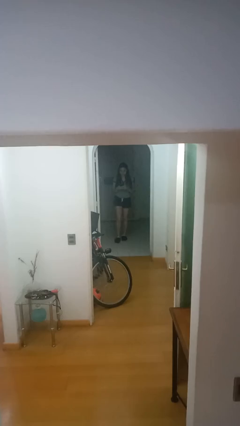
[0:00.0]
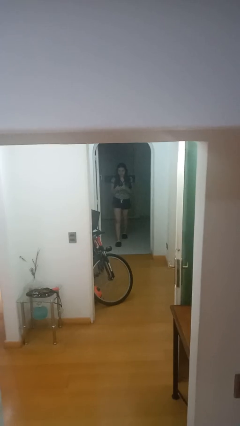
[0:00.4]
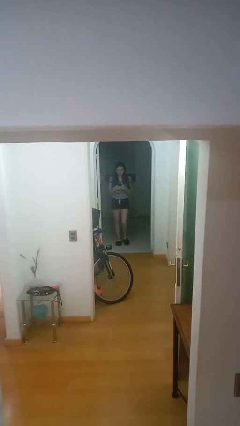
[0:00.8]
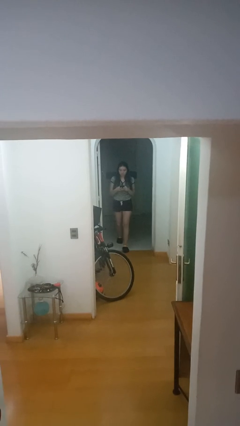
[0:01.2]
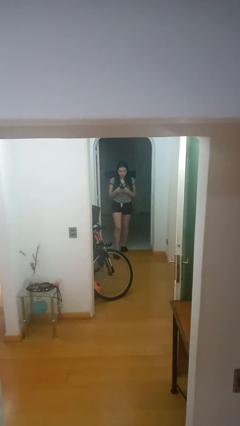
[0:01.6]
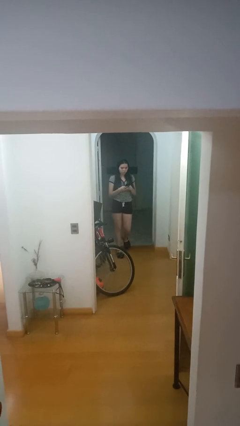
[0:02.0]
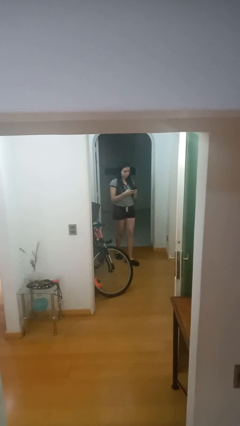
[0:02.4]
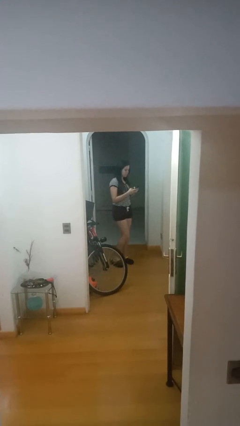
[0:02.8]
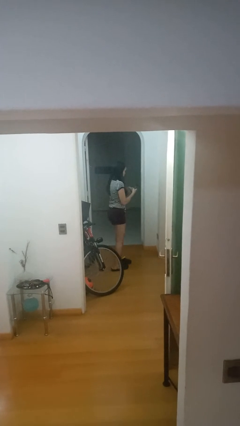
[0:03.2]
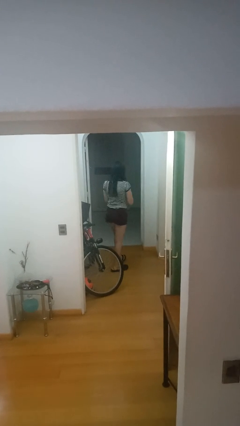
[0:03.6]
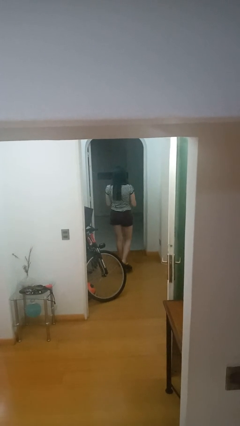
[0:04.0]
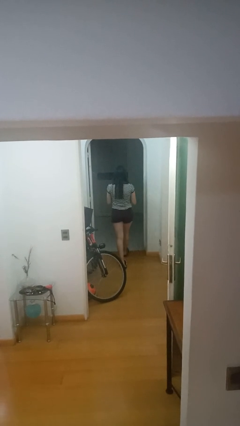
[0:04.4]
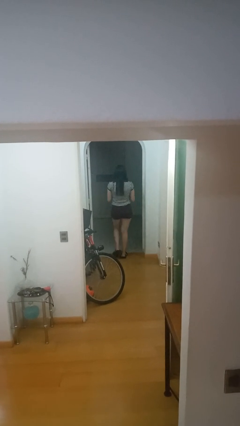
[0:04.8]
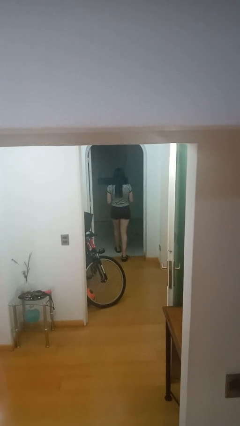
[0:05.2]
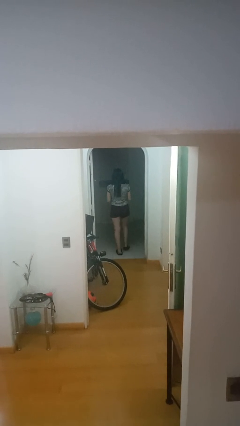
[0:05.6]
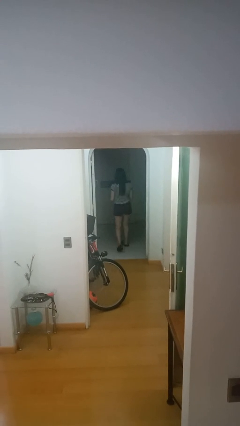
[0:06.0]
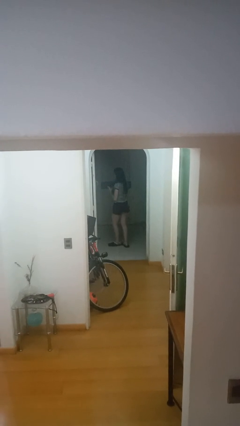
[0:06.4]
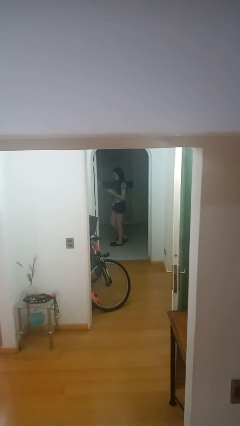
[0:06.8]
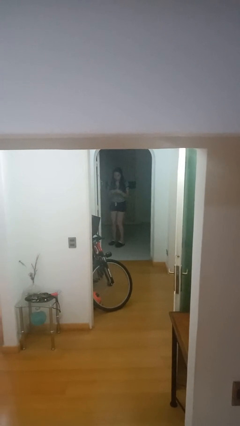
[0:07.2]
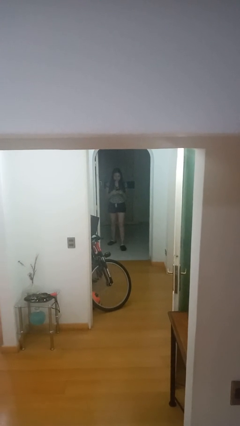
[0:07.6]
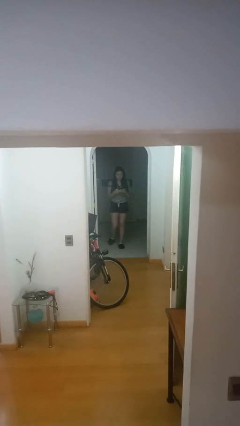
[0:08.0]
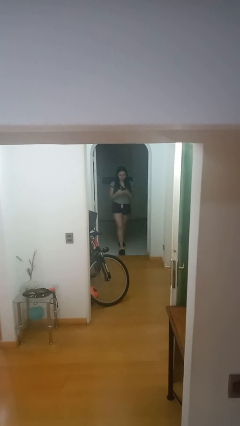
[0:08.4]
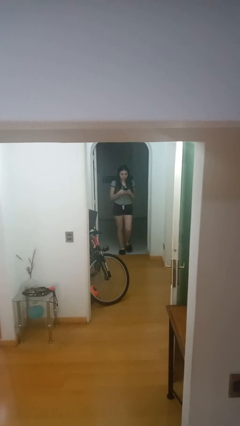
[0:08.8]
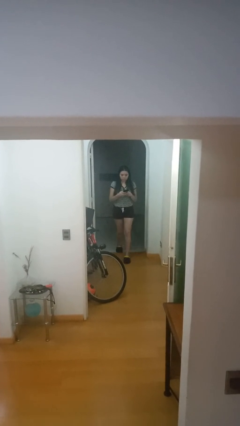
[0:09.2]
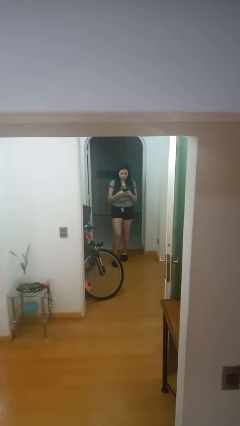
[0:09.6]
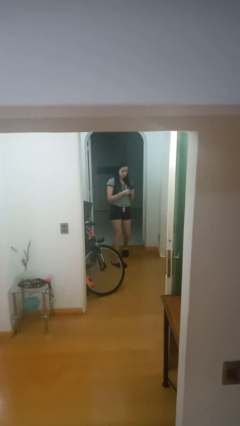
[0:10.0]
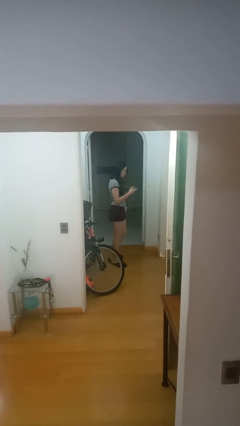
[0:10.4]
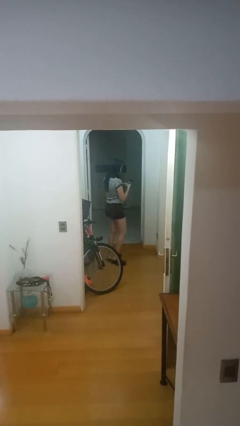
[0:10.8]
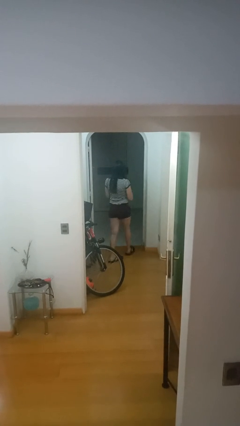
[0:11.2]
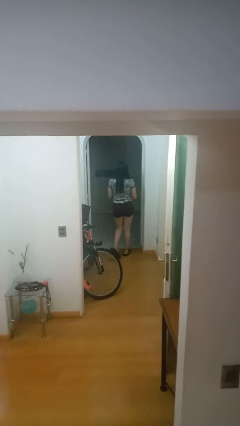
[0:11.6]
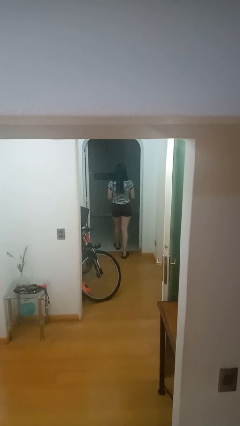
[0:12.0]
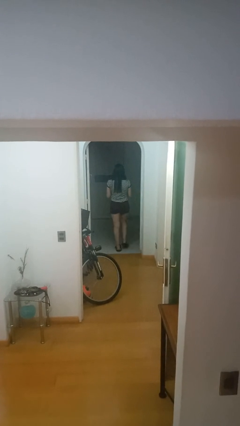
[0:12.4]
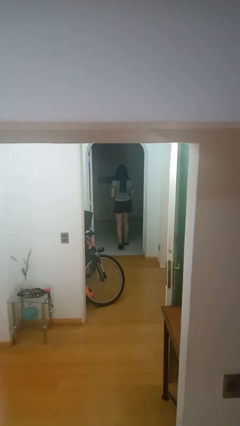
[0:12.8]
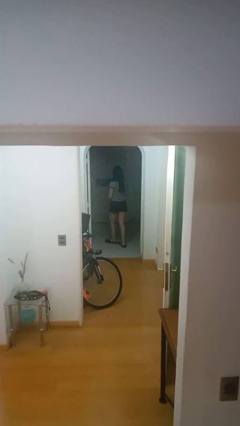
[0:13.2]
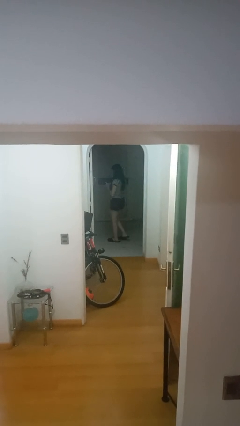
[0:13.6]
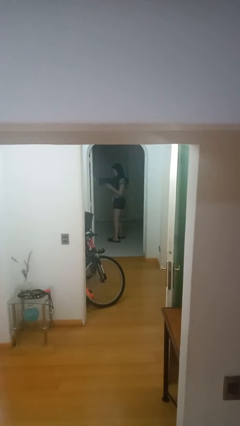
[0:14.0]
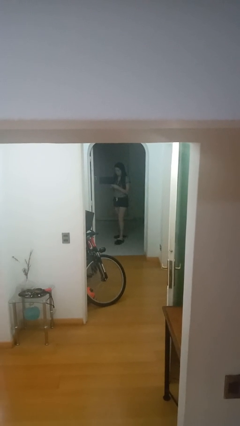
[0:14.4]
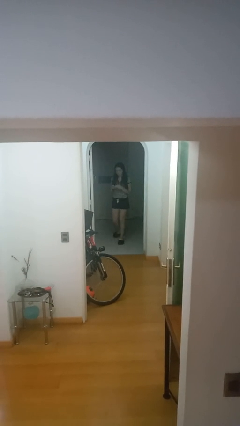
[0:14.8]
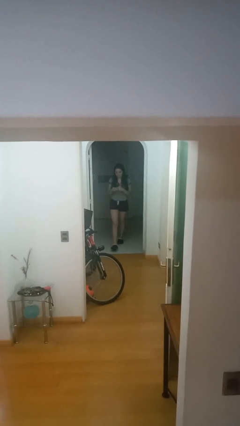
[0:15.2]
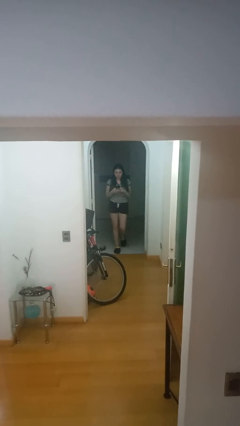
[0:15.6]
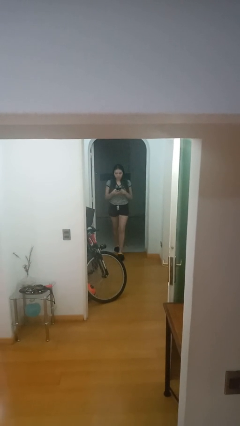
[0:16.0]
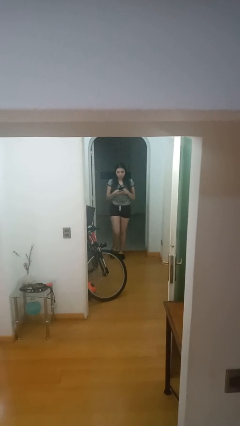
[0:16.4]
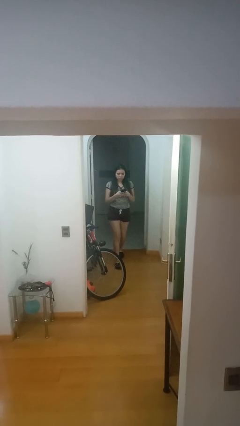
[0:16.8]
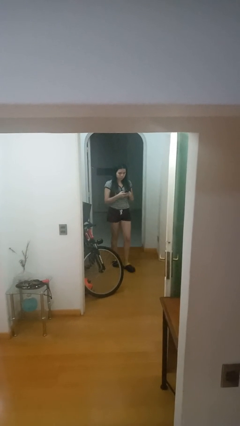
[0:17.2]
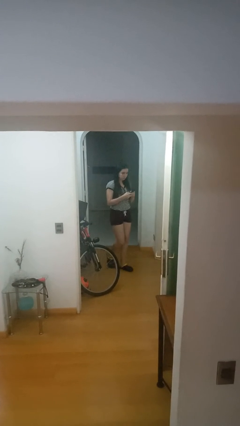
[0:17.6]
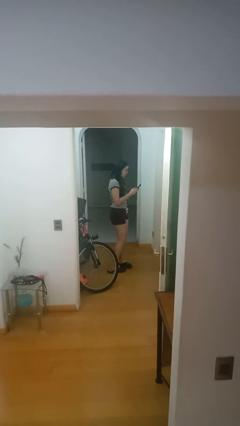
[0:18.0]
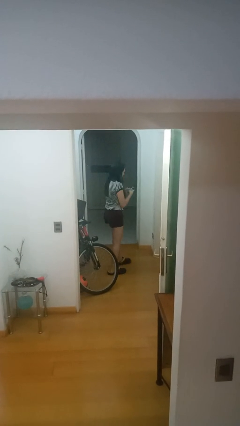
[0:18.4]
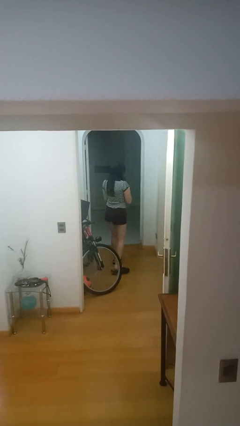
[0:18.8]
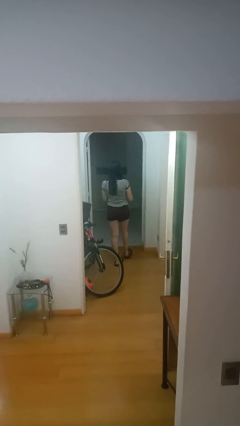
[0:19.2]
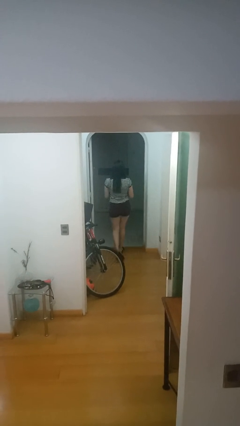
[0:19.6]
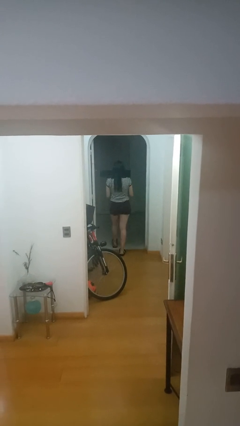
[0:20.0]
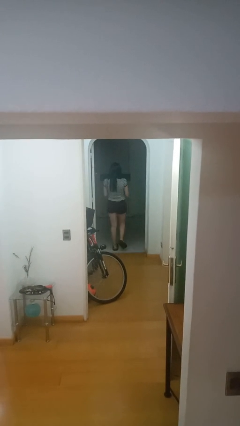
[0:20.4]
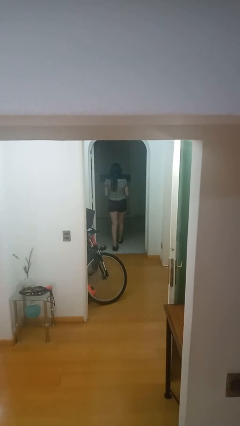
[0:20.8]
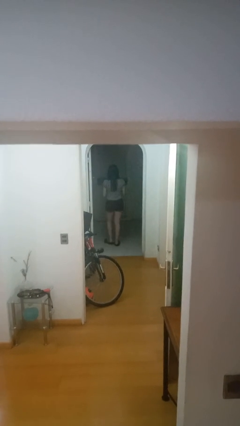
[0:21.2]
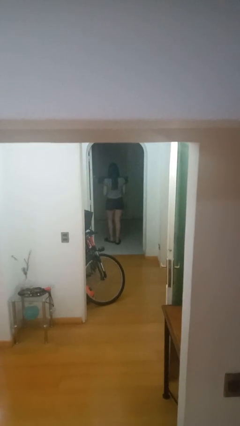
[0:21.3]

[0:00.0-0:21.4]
person texts on phone

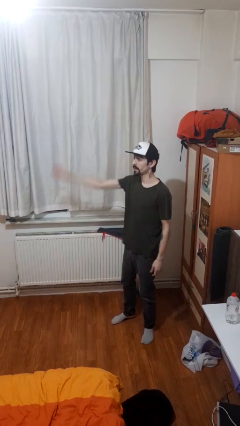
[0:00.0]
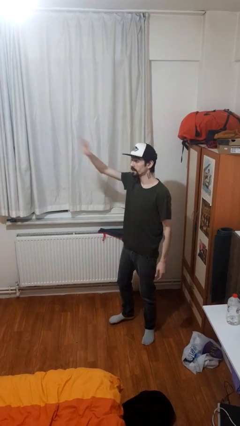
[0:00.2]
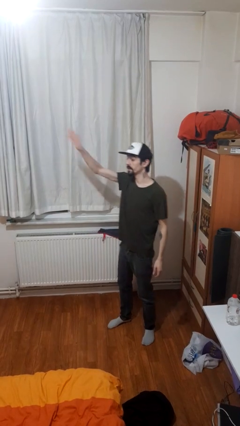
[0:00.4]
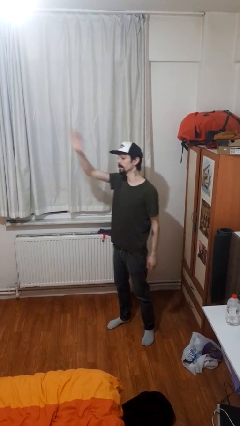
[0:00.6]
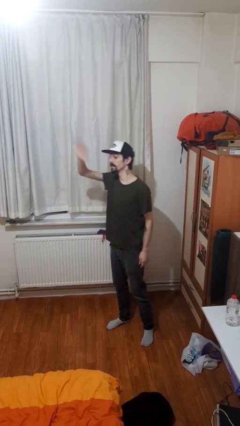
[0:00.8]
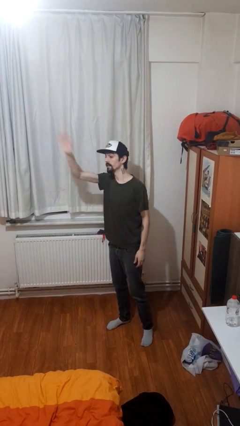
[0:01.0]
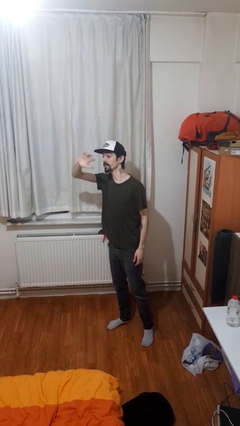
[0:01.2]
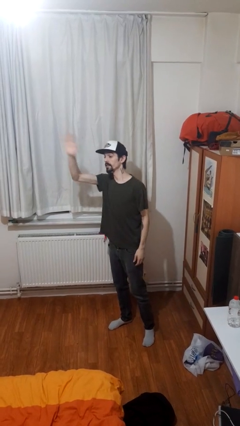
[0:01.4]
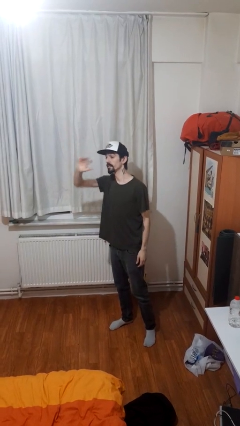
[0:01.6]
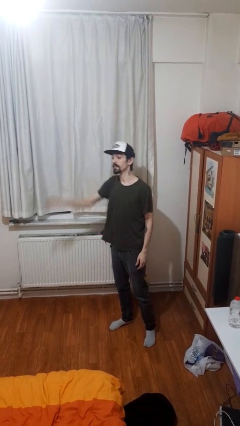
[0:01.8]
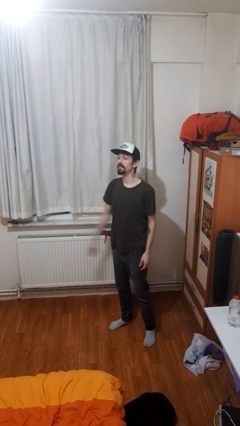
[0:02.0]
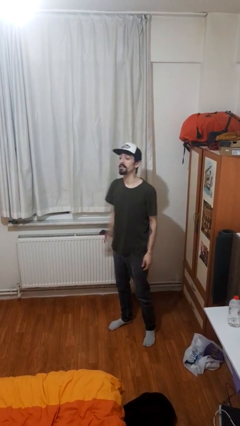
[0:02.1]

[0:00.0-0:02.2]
person waves at person

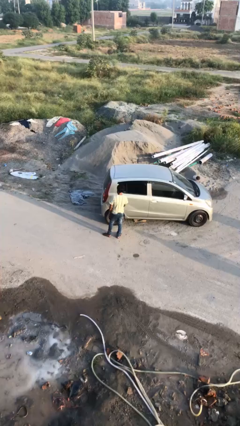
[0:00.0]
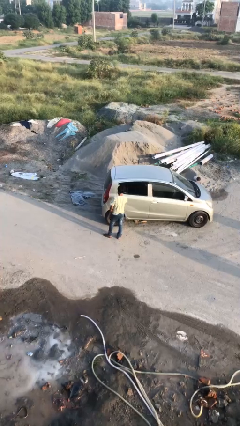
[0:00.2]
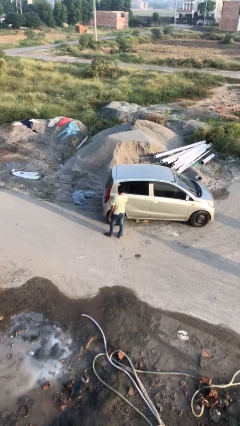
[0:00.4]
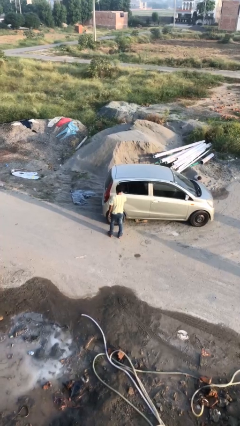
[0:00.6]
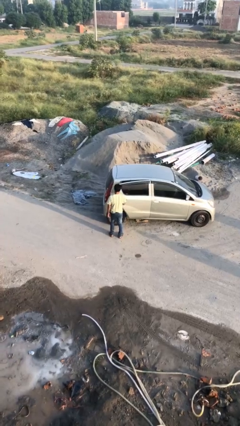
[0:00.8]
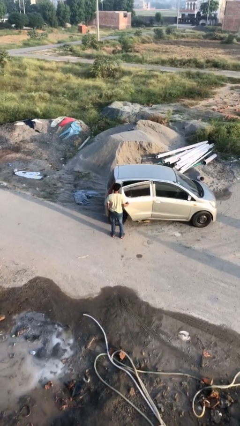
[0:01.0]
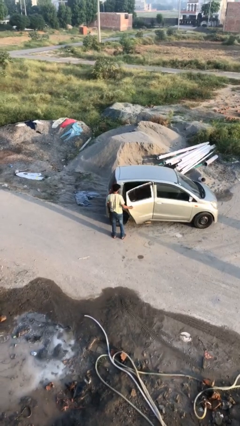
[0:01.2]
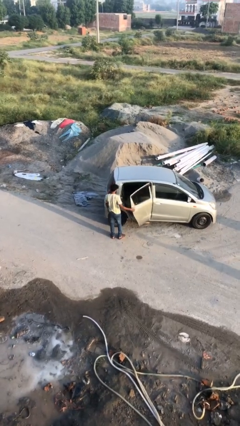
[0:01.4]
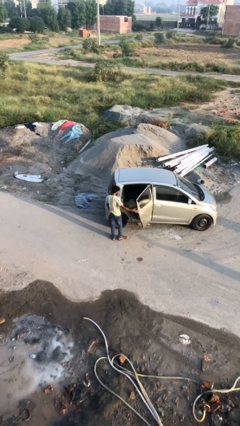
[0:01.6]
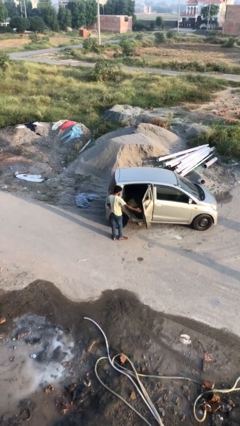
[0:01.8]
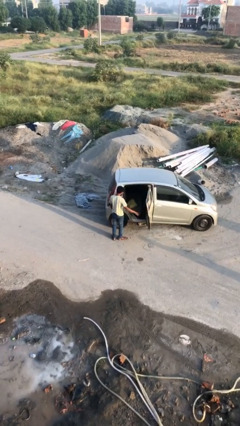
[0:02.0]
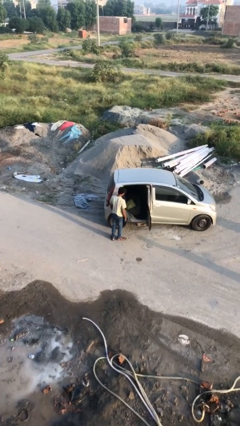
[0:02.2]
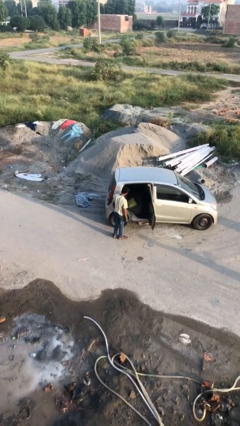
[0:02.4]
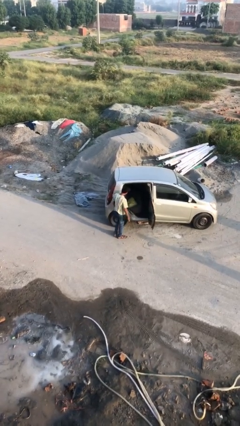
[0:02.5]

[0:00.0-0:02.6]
person opens car door

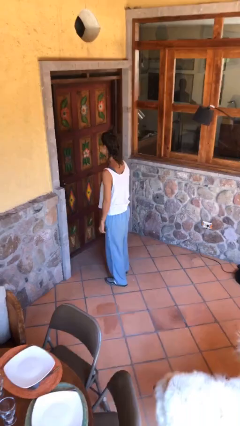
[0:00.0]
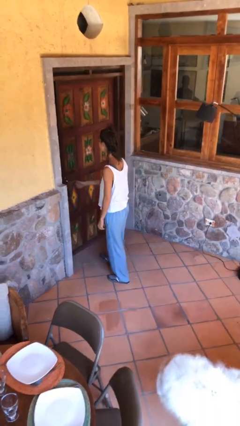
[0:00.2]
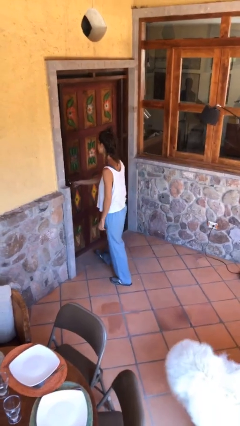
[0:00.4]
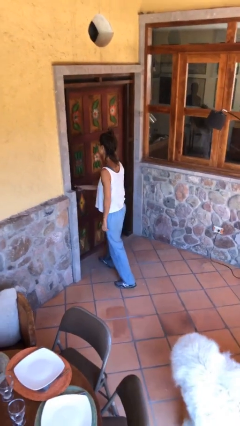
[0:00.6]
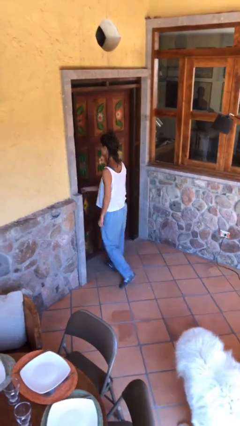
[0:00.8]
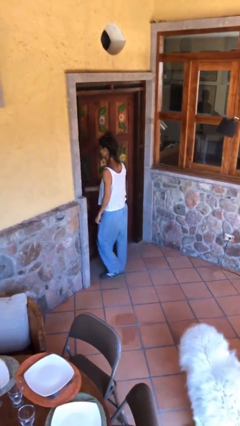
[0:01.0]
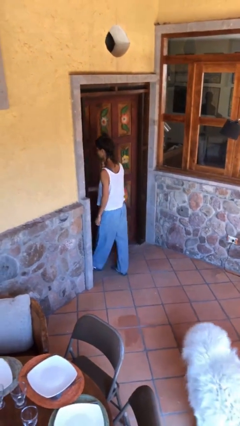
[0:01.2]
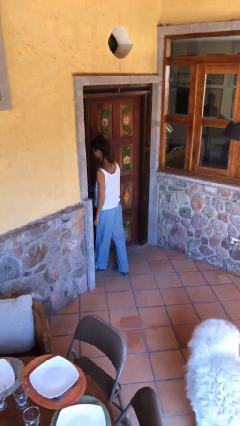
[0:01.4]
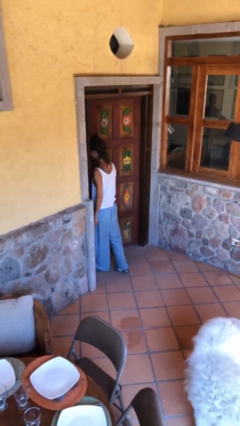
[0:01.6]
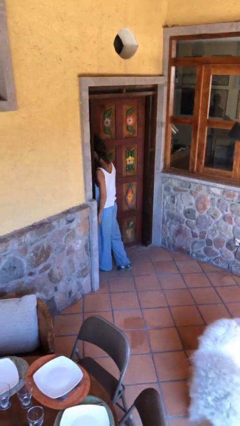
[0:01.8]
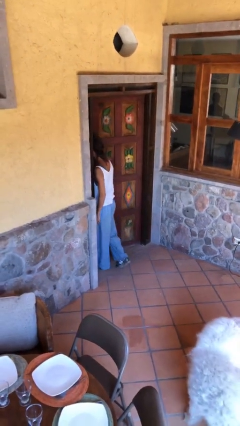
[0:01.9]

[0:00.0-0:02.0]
person opens facility door
